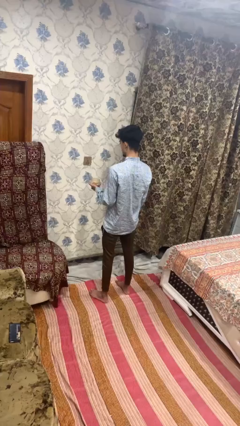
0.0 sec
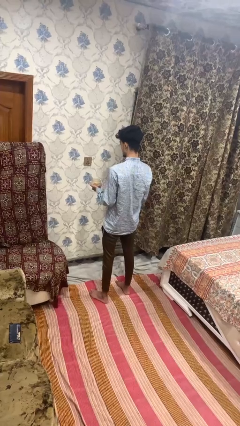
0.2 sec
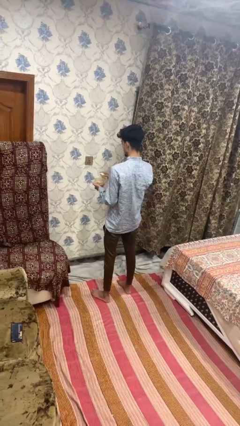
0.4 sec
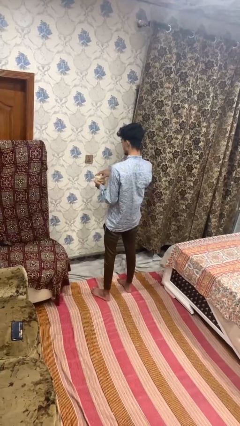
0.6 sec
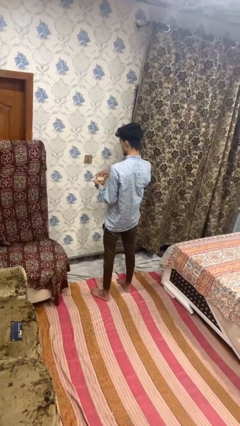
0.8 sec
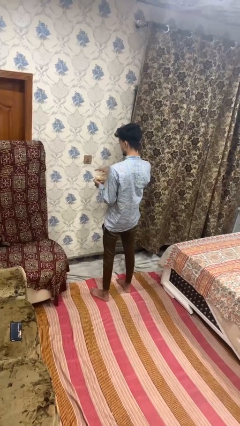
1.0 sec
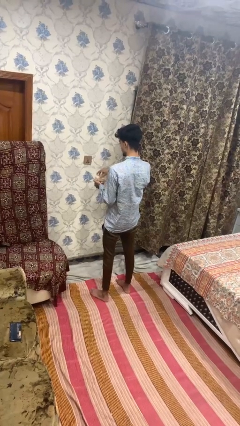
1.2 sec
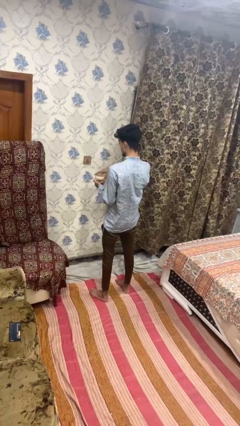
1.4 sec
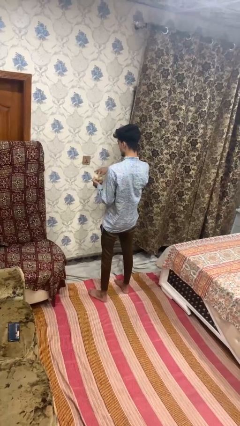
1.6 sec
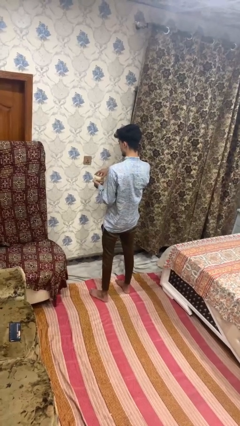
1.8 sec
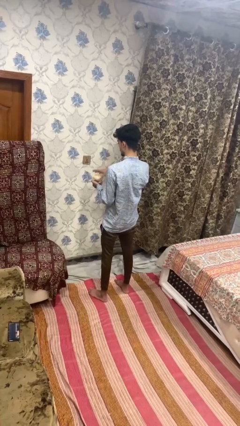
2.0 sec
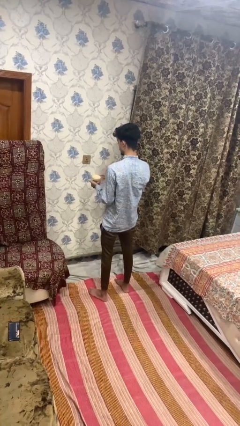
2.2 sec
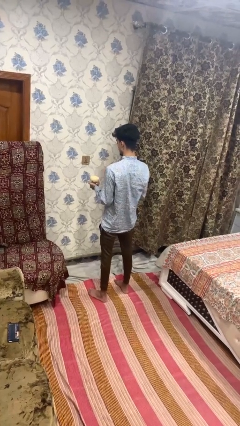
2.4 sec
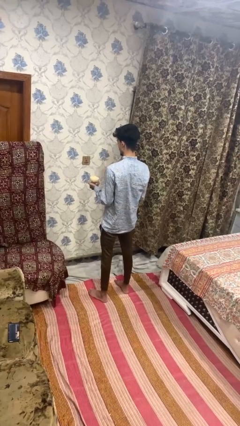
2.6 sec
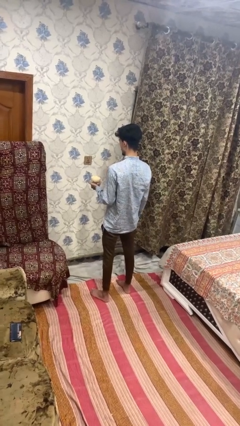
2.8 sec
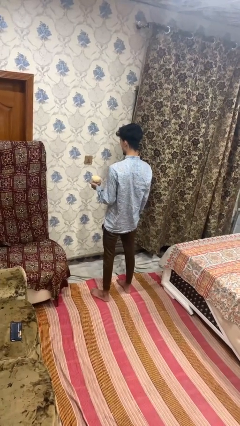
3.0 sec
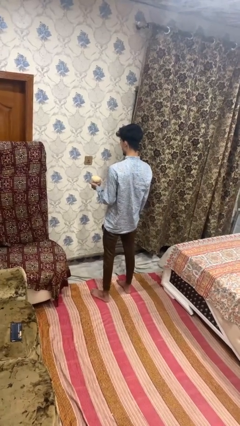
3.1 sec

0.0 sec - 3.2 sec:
person closes jar

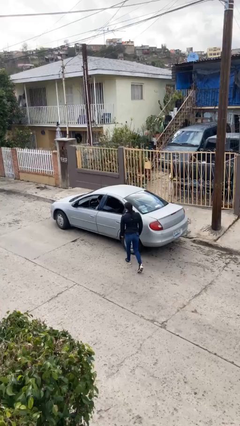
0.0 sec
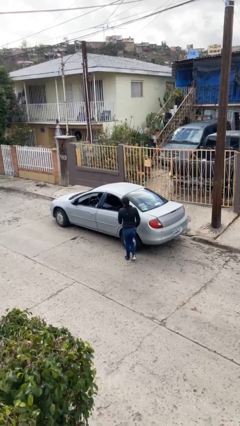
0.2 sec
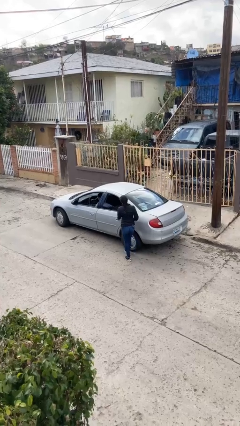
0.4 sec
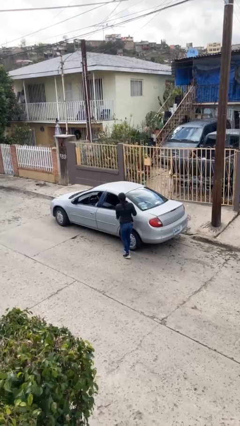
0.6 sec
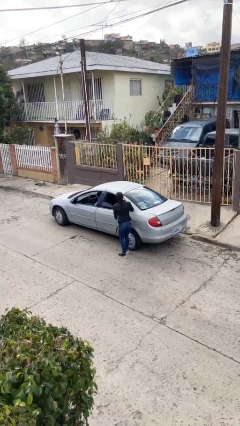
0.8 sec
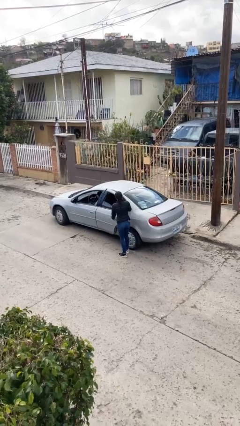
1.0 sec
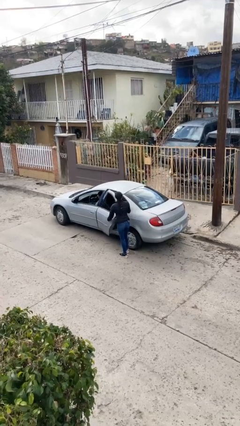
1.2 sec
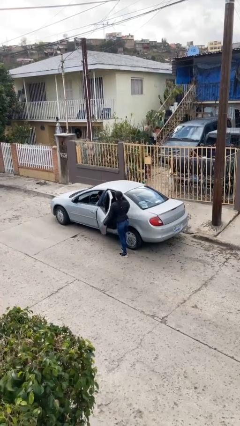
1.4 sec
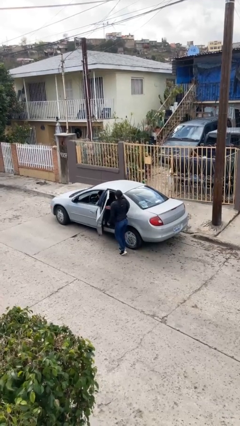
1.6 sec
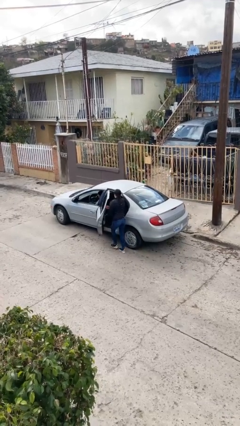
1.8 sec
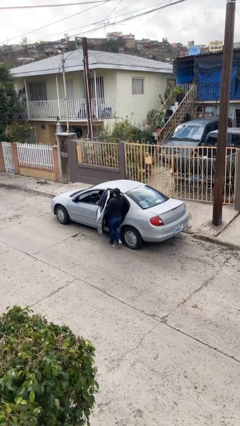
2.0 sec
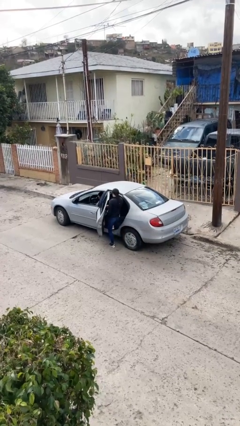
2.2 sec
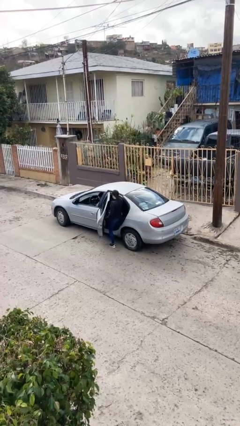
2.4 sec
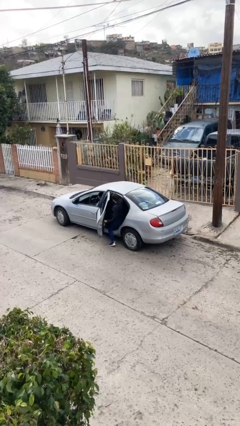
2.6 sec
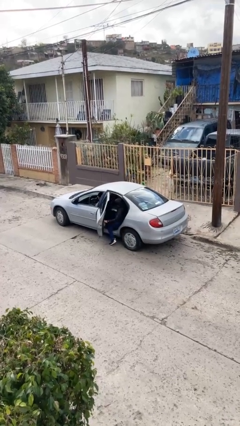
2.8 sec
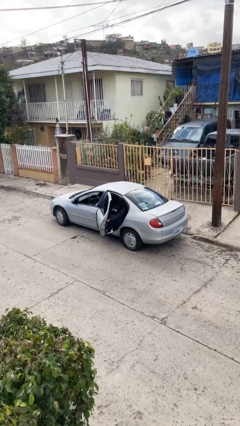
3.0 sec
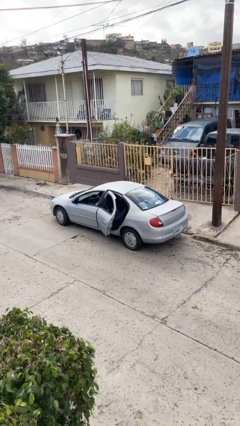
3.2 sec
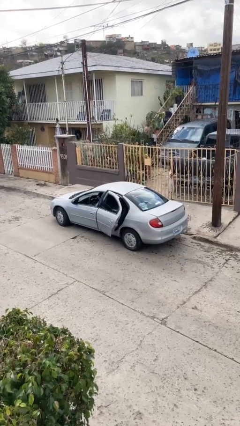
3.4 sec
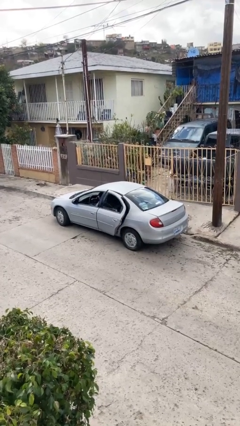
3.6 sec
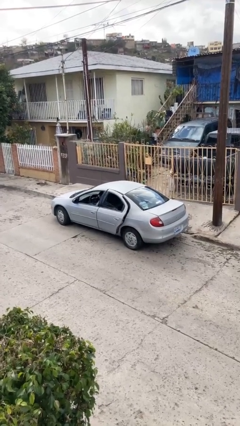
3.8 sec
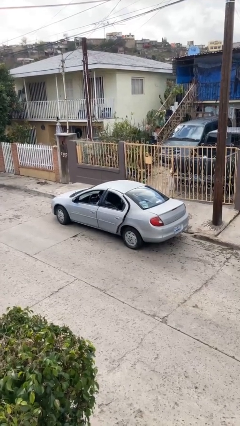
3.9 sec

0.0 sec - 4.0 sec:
car picks up person

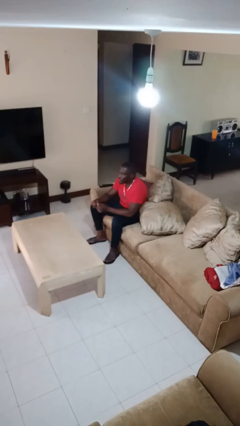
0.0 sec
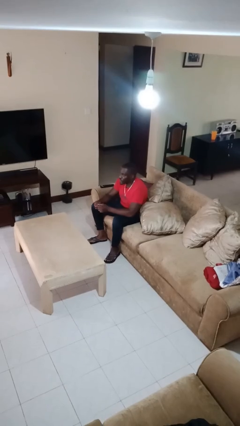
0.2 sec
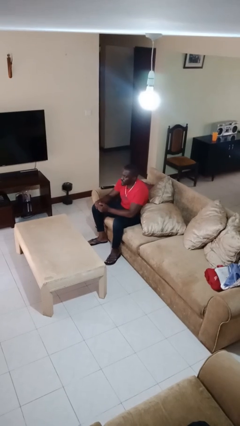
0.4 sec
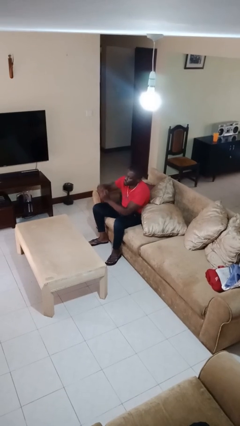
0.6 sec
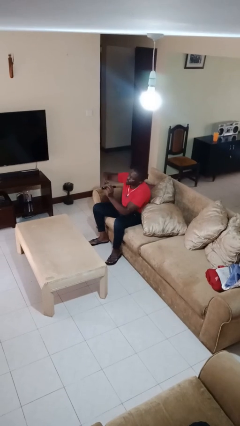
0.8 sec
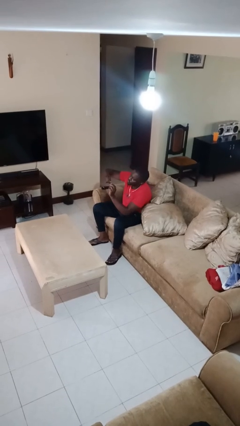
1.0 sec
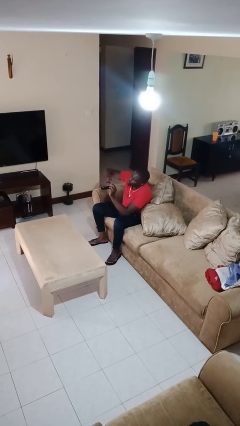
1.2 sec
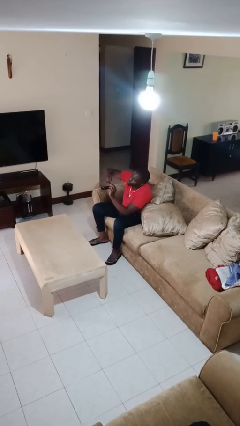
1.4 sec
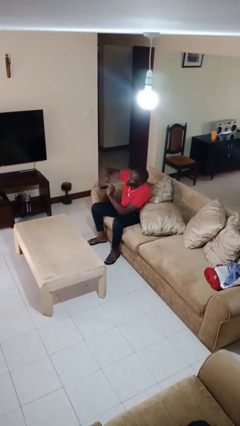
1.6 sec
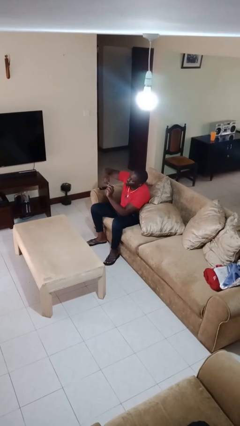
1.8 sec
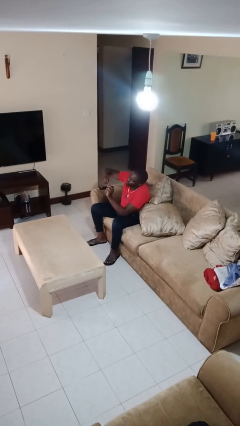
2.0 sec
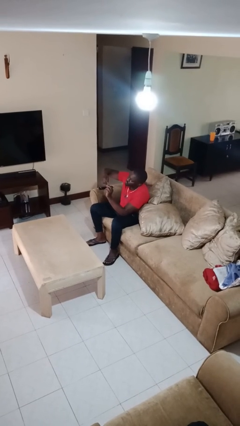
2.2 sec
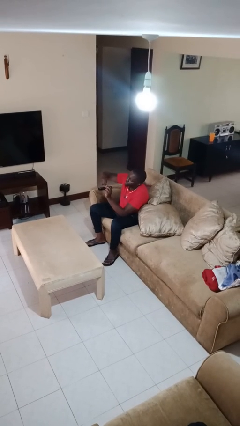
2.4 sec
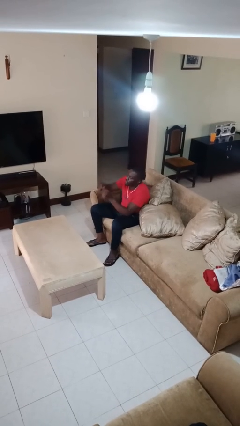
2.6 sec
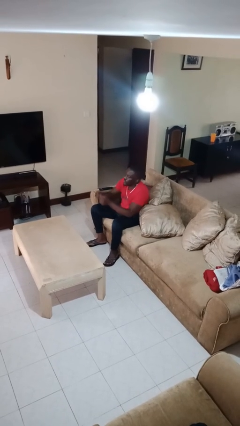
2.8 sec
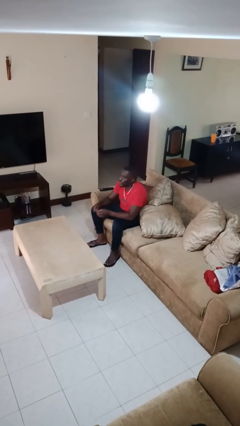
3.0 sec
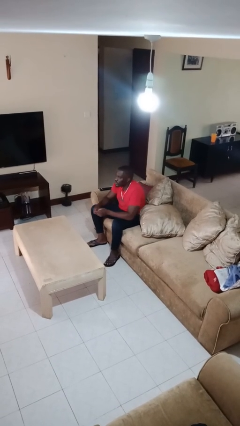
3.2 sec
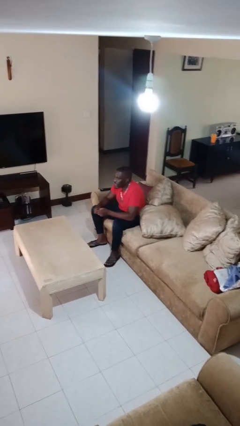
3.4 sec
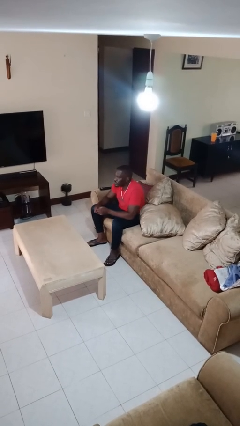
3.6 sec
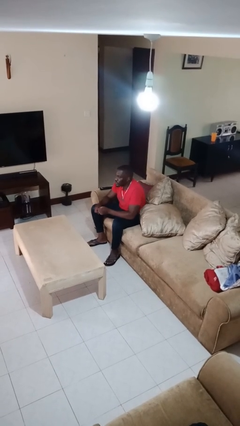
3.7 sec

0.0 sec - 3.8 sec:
person clips fingernails

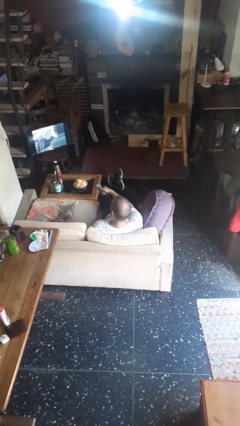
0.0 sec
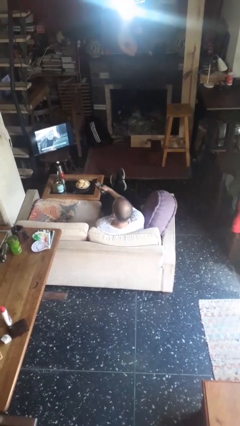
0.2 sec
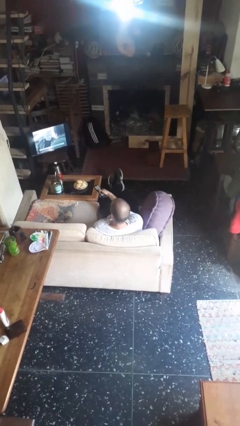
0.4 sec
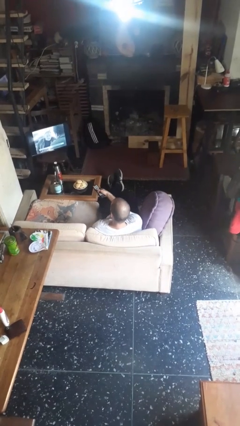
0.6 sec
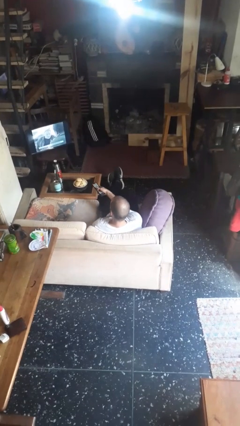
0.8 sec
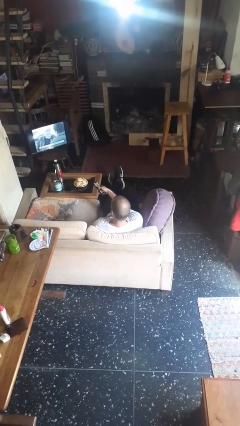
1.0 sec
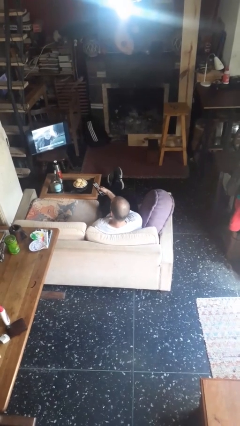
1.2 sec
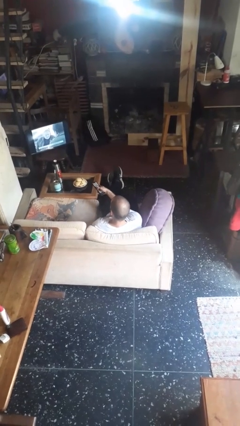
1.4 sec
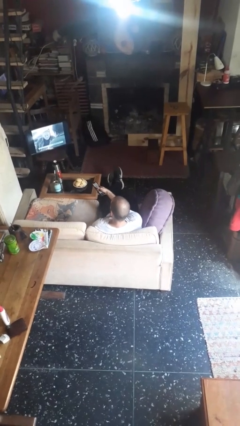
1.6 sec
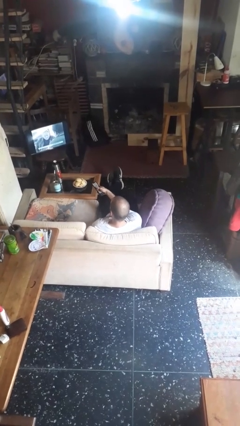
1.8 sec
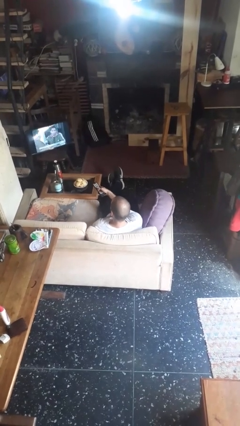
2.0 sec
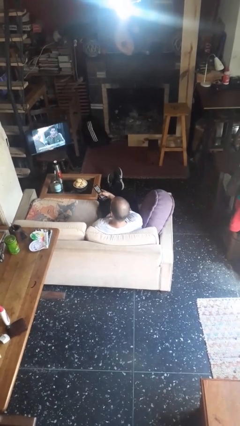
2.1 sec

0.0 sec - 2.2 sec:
person uses television remote

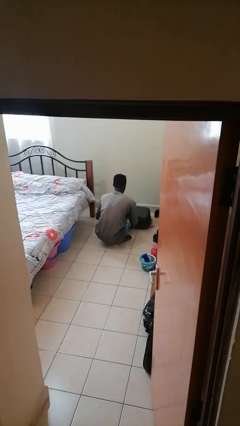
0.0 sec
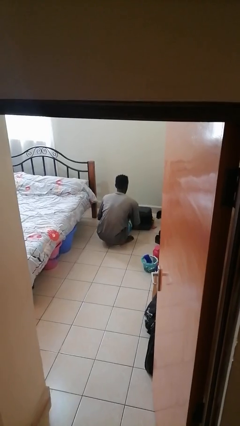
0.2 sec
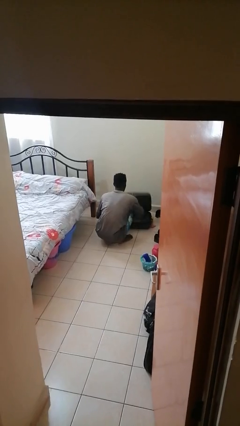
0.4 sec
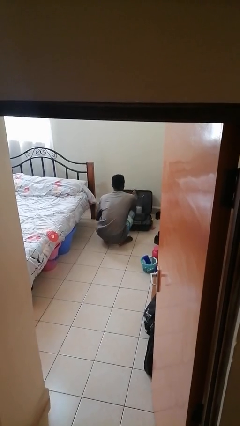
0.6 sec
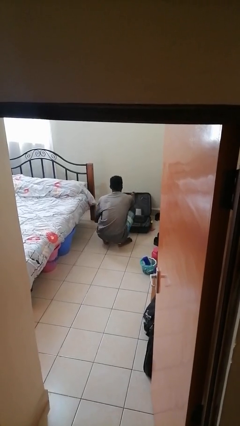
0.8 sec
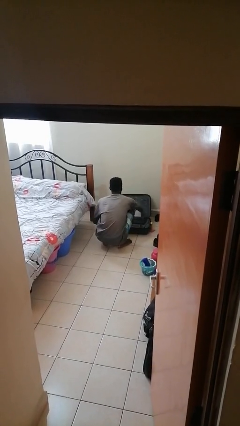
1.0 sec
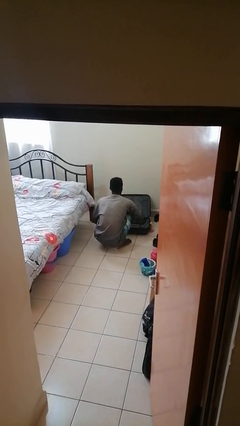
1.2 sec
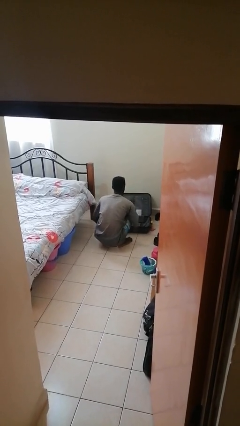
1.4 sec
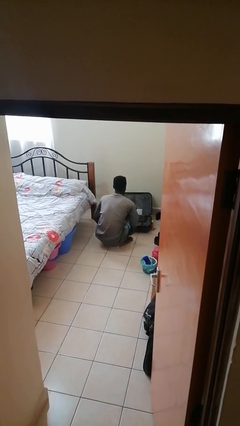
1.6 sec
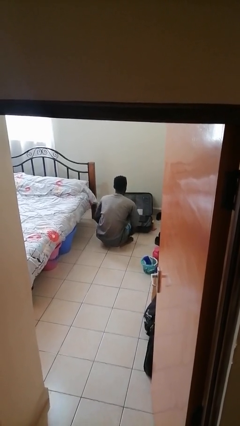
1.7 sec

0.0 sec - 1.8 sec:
person opens suitcase

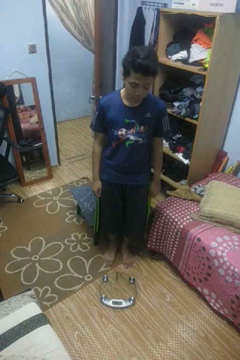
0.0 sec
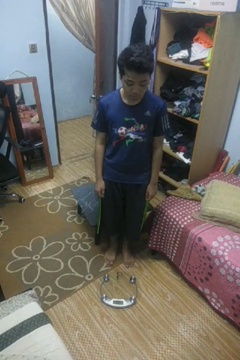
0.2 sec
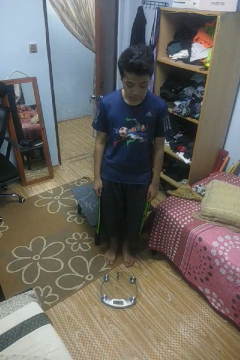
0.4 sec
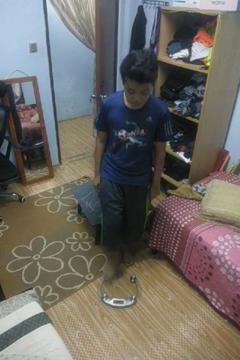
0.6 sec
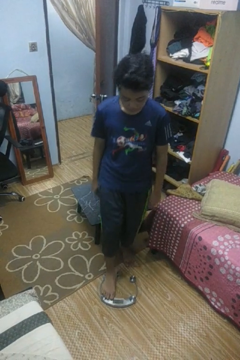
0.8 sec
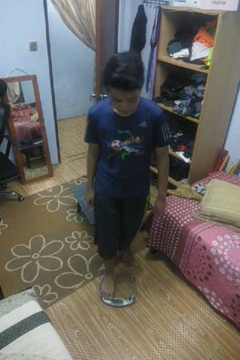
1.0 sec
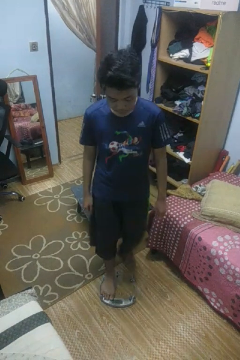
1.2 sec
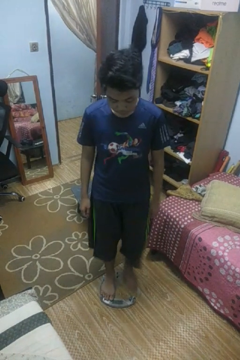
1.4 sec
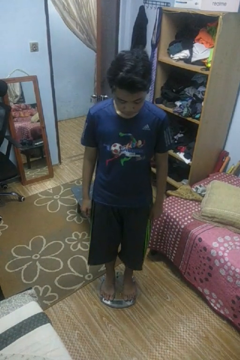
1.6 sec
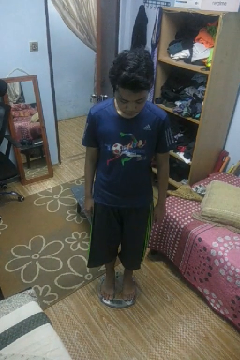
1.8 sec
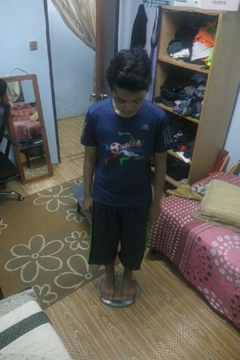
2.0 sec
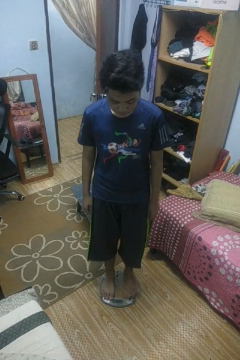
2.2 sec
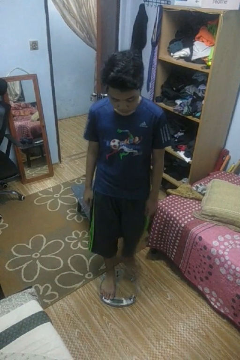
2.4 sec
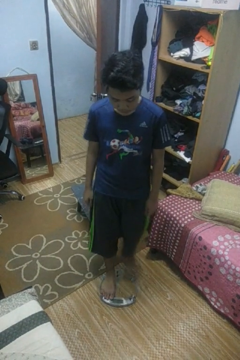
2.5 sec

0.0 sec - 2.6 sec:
person uses bodyweight scale

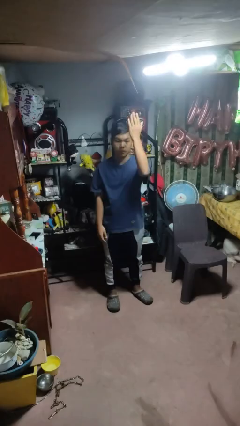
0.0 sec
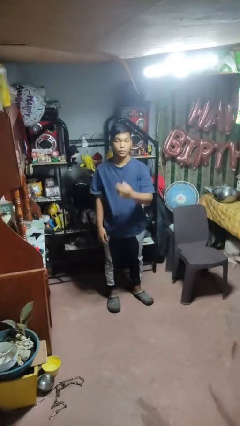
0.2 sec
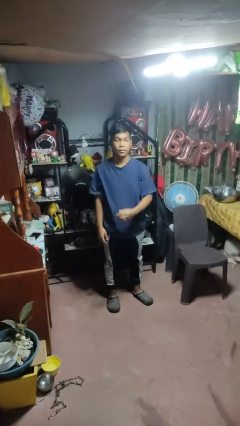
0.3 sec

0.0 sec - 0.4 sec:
person gestures swipe up
